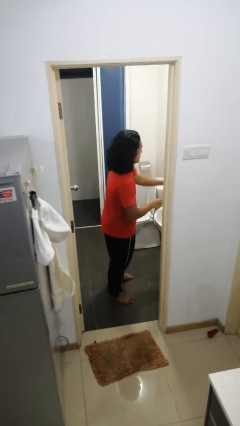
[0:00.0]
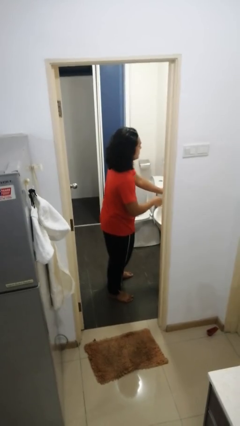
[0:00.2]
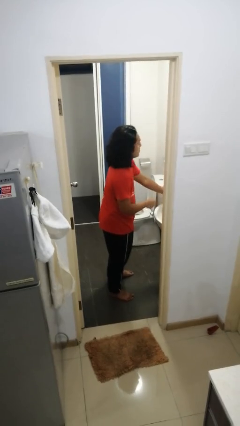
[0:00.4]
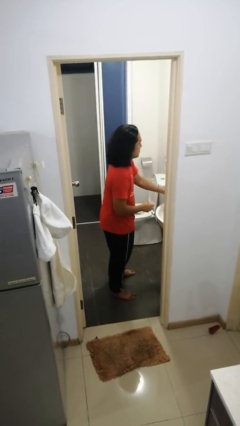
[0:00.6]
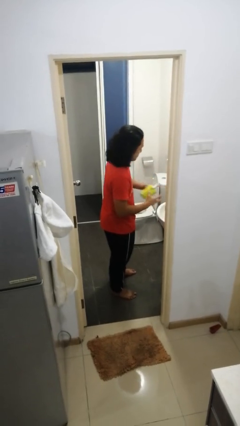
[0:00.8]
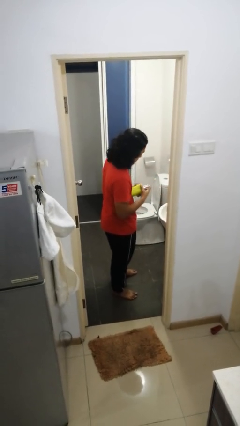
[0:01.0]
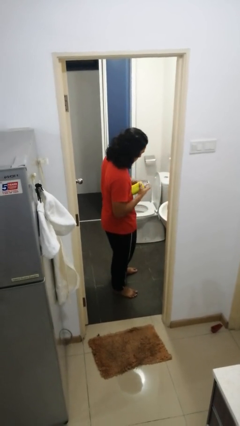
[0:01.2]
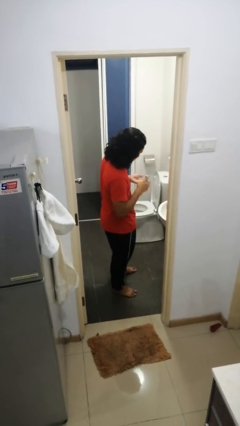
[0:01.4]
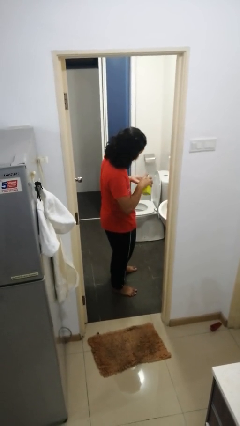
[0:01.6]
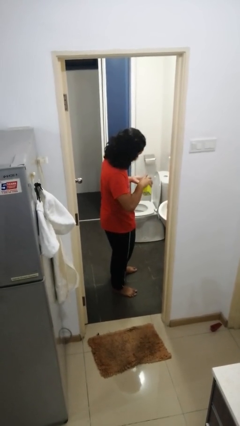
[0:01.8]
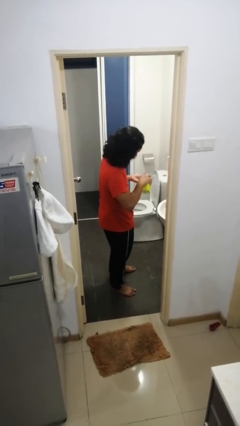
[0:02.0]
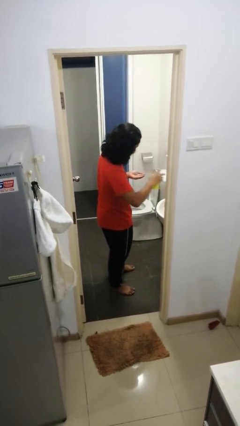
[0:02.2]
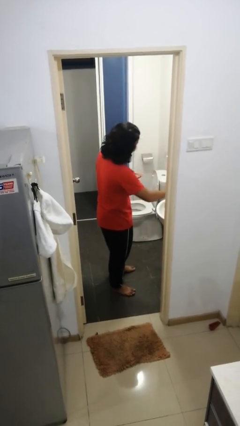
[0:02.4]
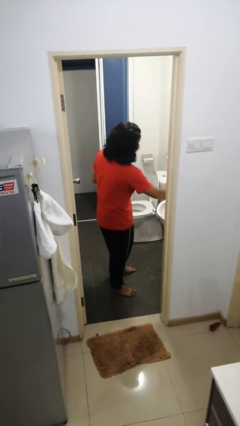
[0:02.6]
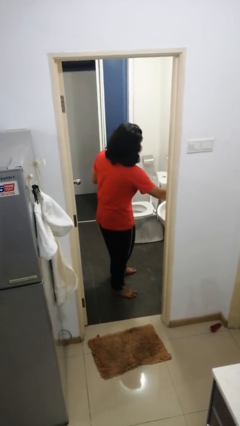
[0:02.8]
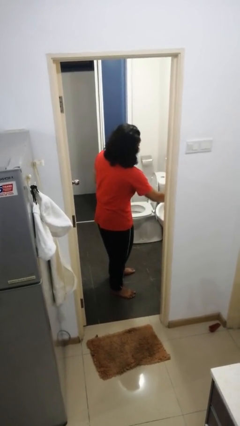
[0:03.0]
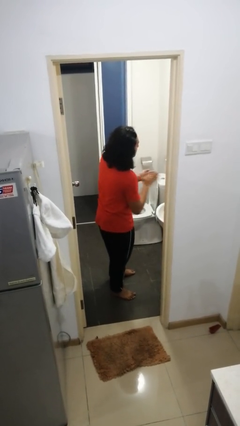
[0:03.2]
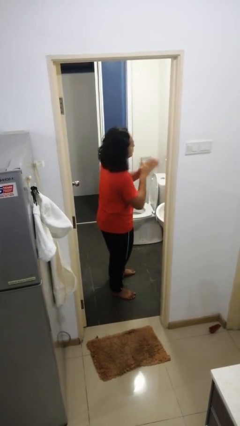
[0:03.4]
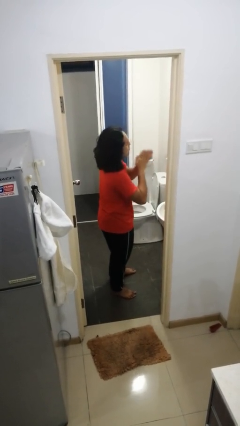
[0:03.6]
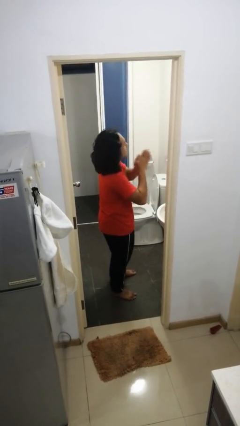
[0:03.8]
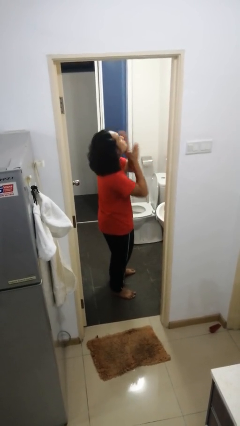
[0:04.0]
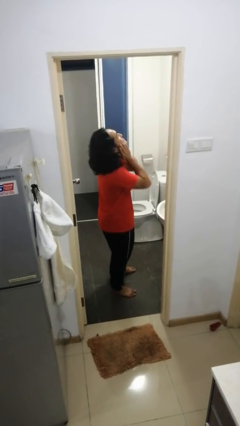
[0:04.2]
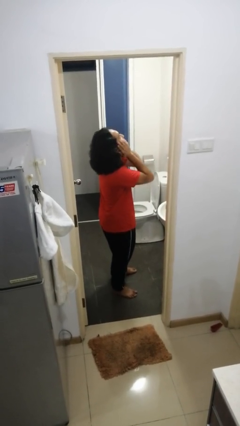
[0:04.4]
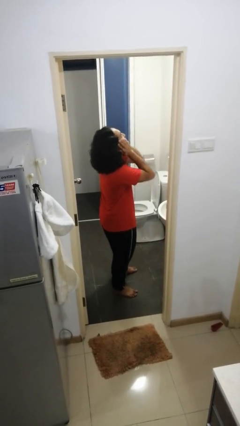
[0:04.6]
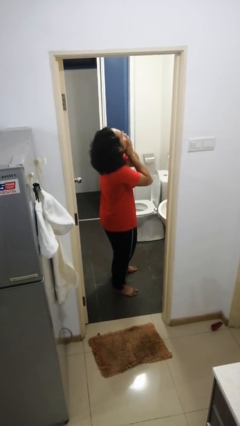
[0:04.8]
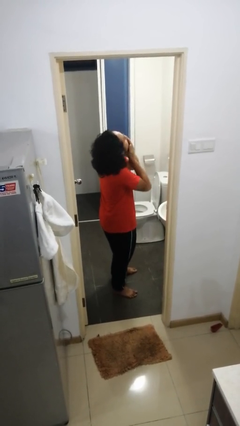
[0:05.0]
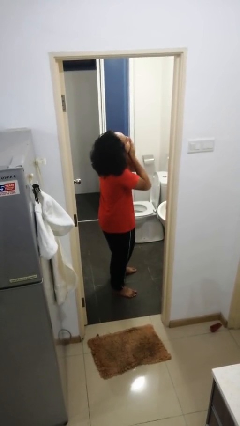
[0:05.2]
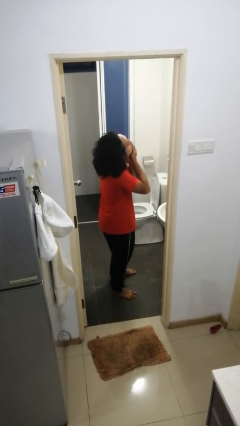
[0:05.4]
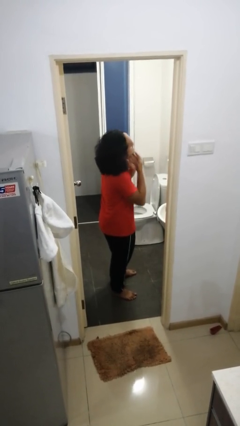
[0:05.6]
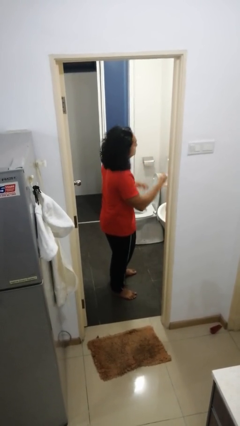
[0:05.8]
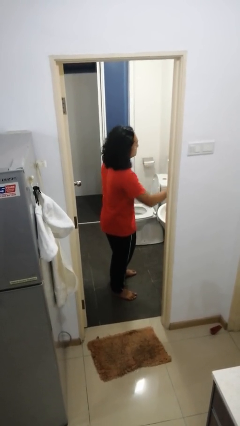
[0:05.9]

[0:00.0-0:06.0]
person applies shaving cream

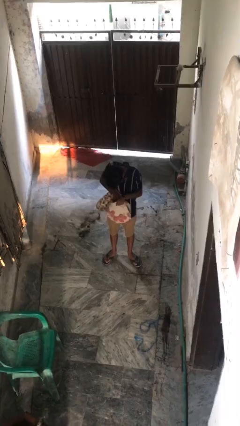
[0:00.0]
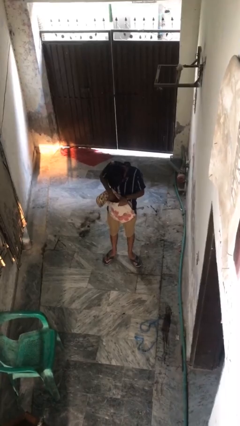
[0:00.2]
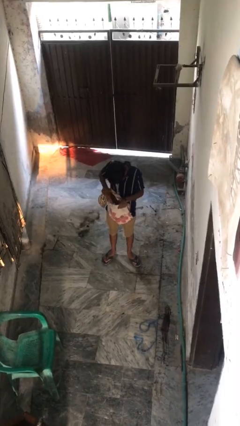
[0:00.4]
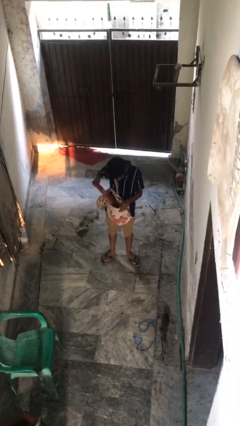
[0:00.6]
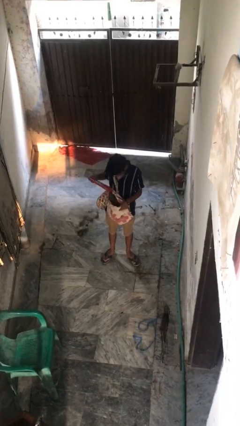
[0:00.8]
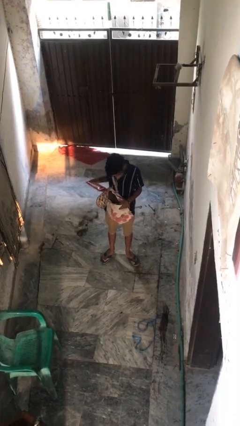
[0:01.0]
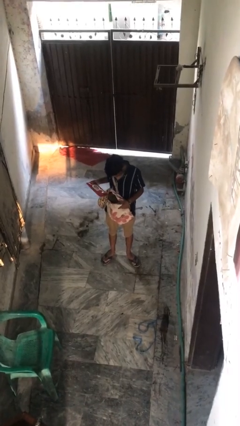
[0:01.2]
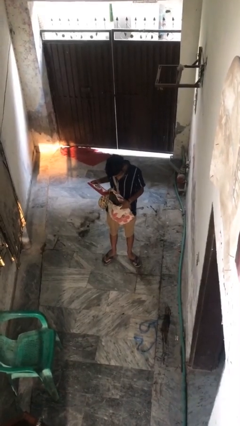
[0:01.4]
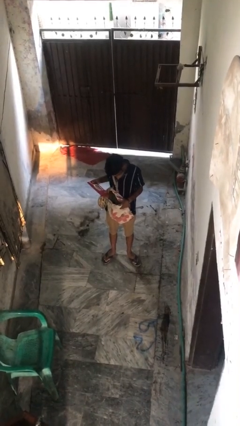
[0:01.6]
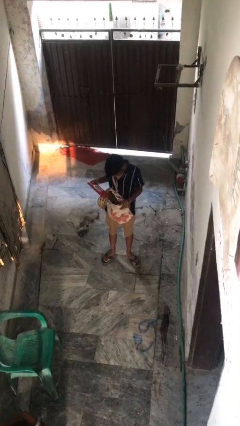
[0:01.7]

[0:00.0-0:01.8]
person takes object from backpack

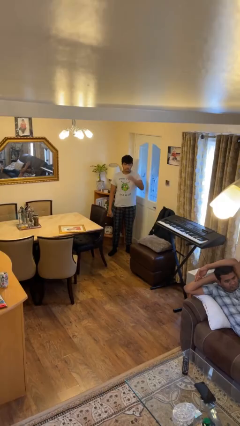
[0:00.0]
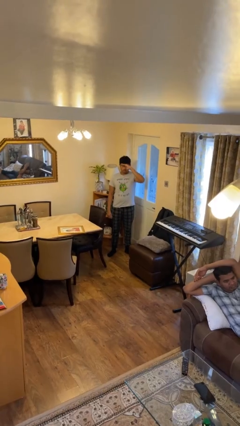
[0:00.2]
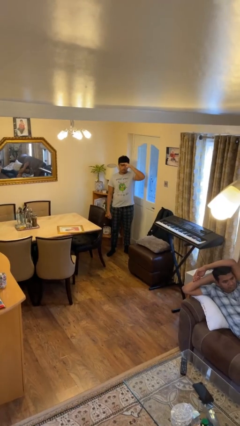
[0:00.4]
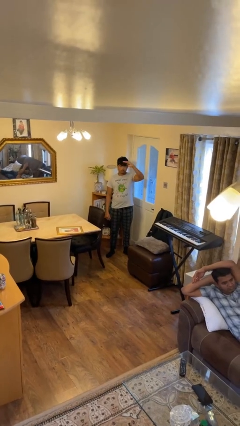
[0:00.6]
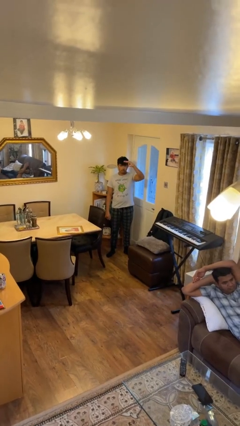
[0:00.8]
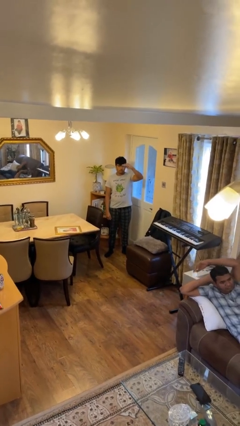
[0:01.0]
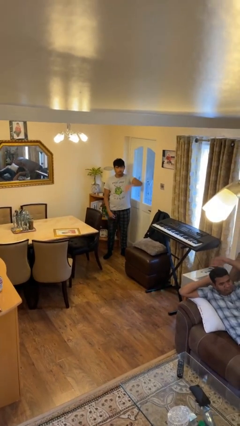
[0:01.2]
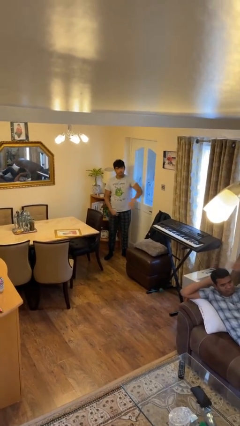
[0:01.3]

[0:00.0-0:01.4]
person salutes

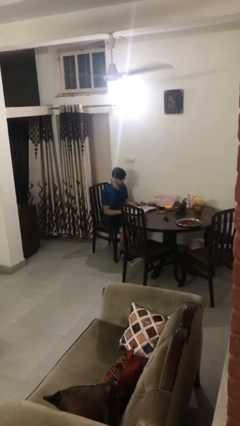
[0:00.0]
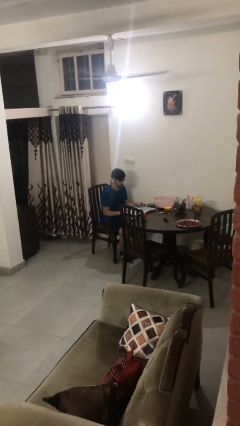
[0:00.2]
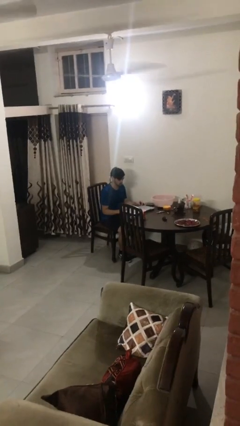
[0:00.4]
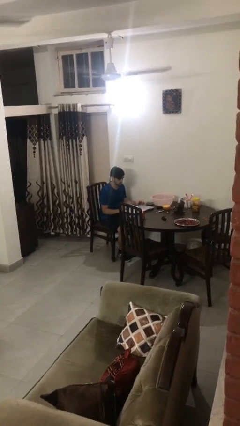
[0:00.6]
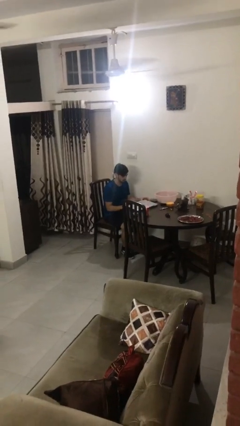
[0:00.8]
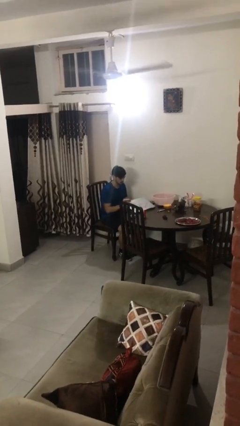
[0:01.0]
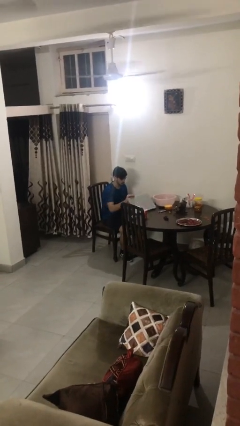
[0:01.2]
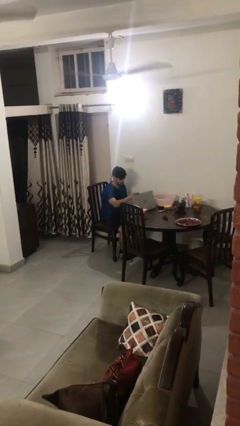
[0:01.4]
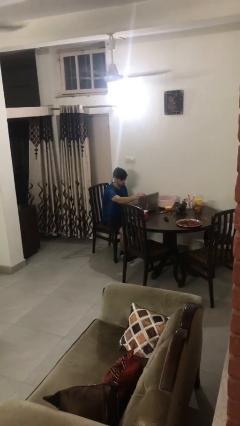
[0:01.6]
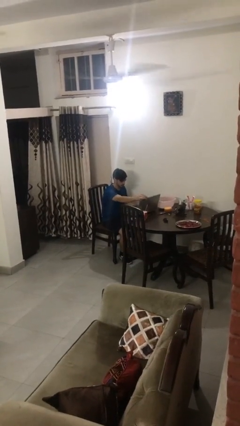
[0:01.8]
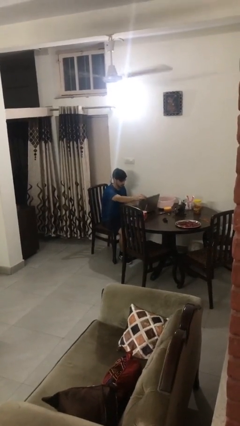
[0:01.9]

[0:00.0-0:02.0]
person opens laptop

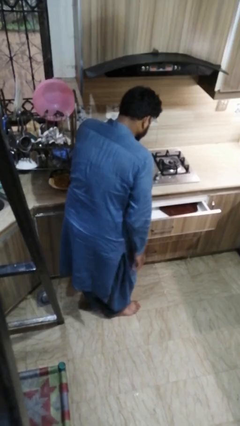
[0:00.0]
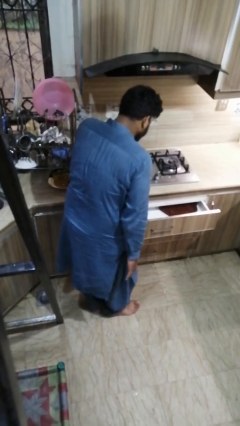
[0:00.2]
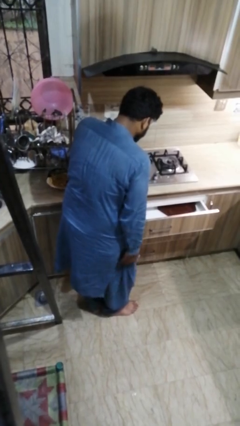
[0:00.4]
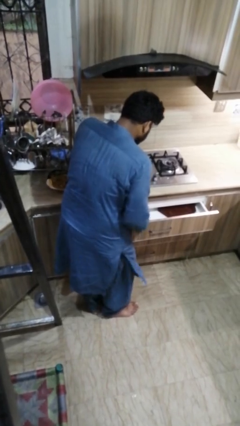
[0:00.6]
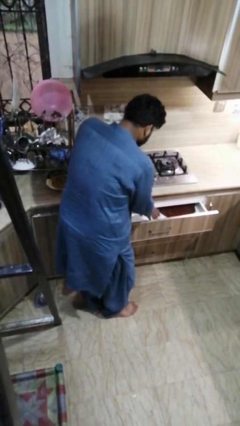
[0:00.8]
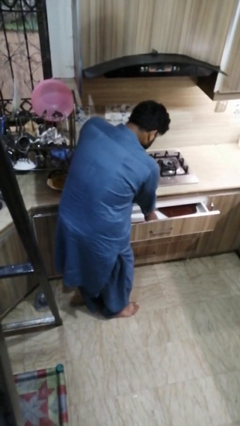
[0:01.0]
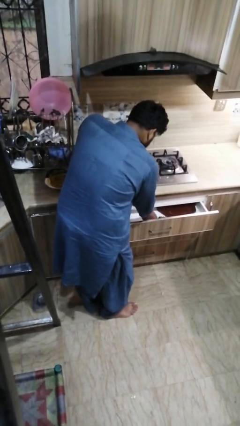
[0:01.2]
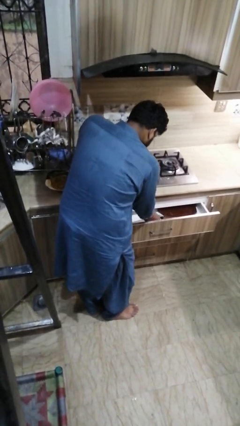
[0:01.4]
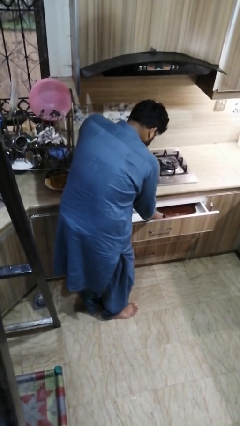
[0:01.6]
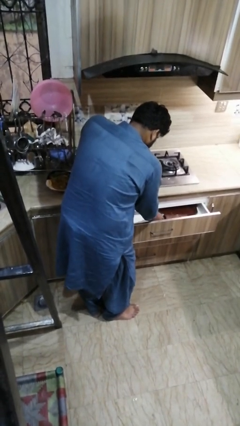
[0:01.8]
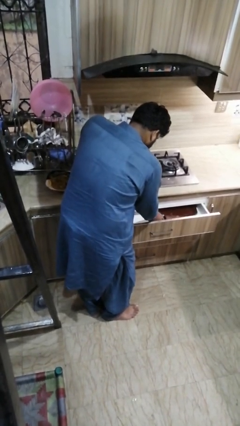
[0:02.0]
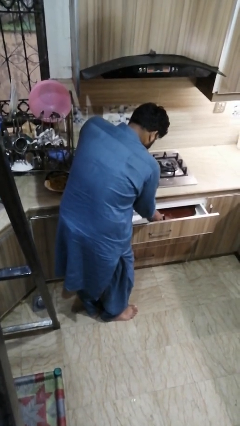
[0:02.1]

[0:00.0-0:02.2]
person searches in kitchen drawer

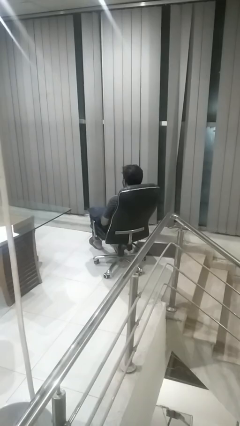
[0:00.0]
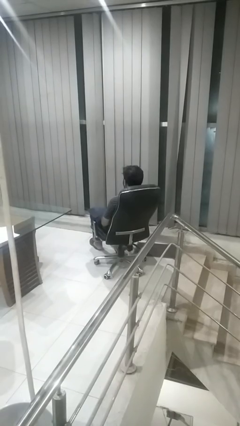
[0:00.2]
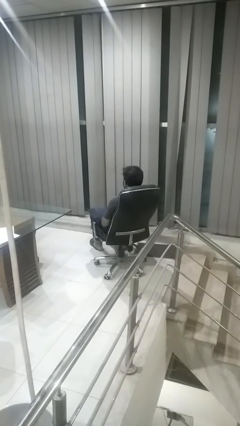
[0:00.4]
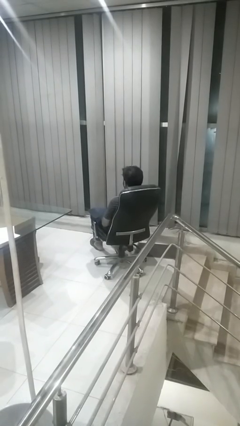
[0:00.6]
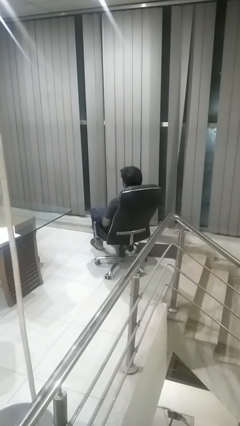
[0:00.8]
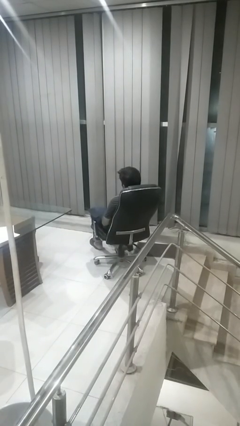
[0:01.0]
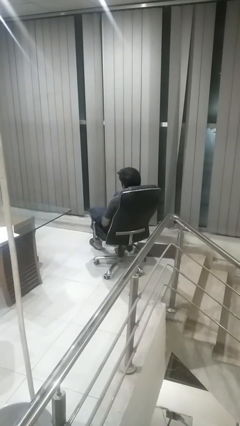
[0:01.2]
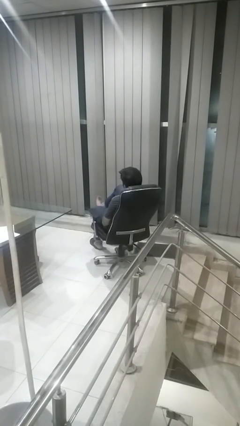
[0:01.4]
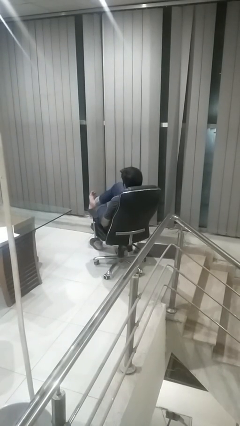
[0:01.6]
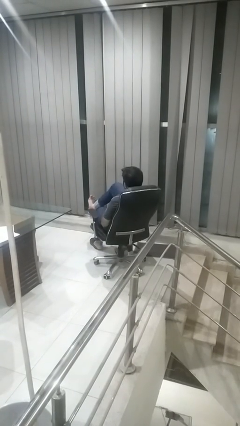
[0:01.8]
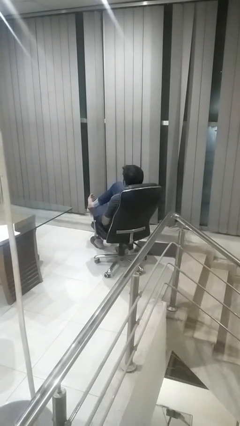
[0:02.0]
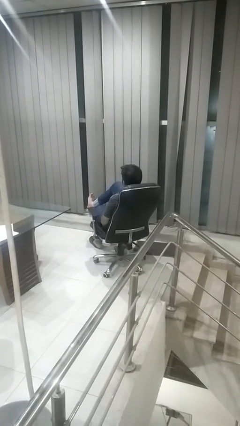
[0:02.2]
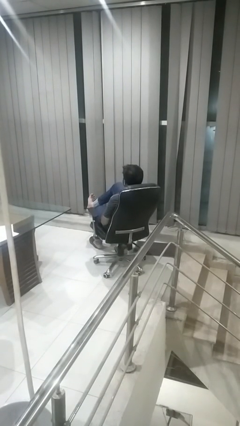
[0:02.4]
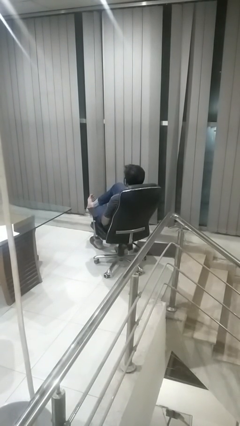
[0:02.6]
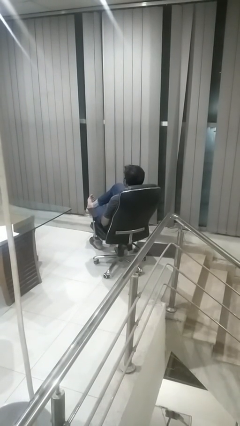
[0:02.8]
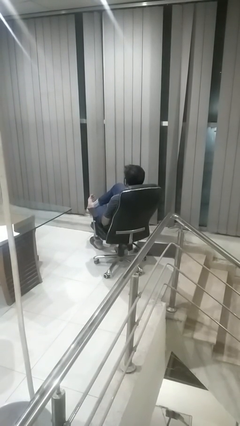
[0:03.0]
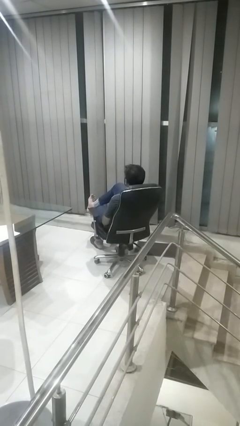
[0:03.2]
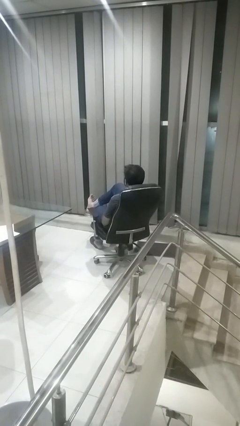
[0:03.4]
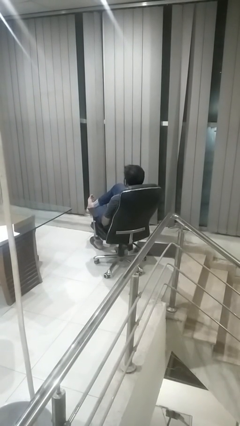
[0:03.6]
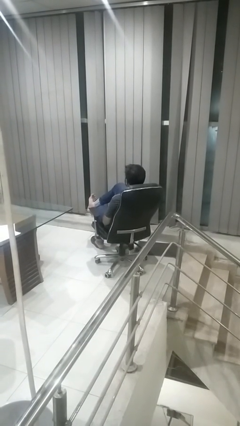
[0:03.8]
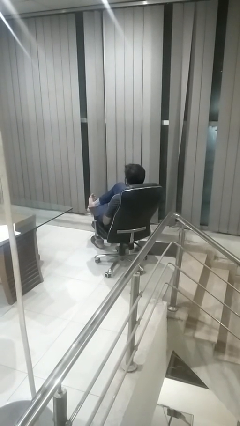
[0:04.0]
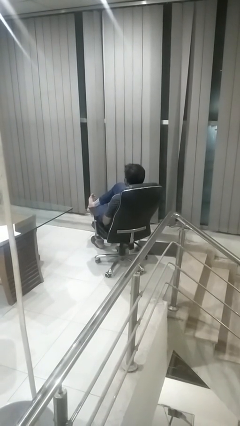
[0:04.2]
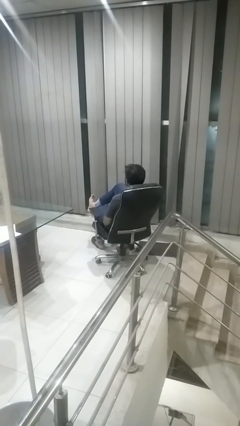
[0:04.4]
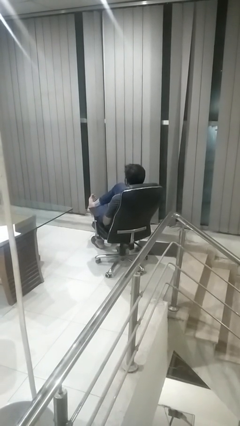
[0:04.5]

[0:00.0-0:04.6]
person crosses legs
